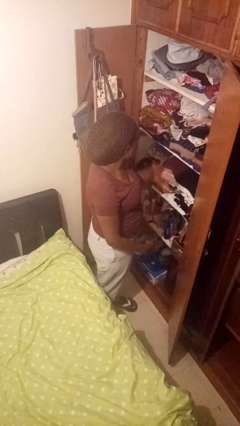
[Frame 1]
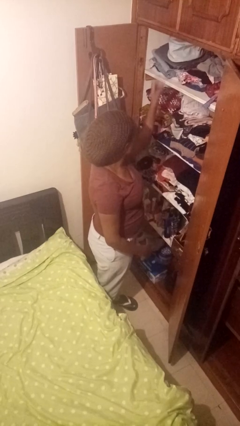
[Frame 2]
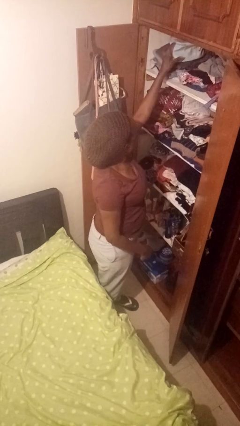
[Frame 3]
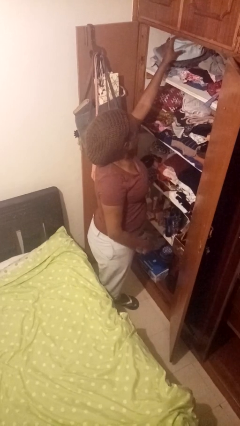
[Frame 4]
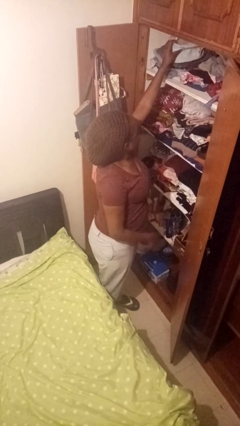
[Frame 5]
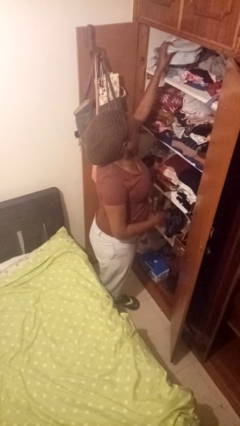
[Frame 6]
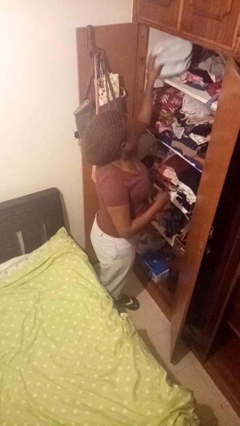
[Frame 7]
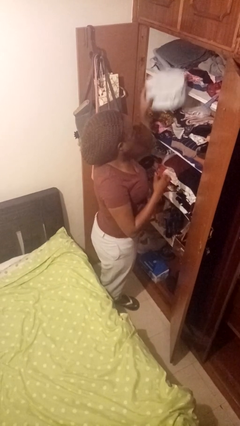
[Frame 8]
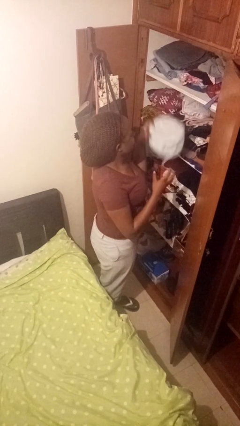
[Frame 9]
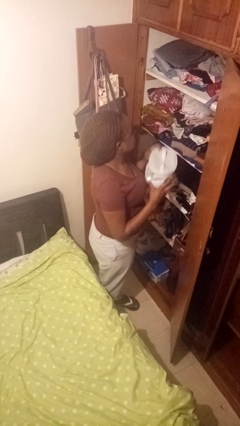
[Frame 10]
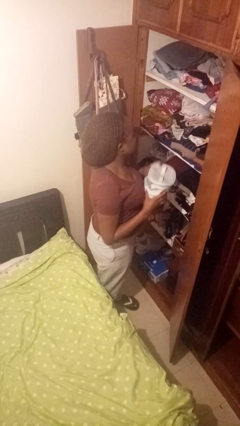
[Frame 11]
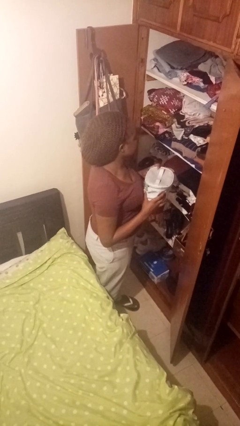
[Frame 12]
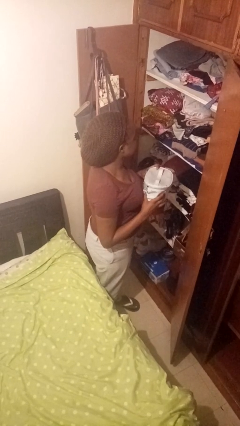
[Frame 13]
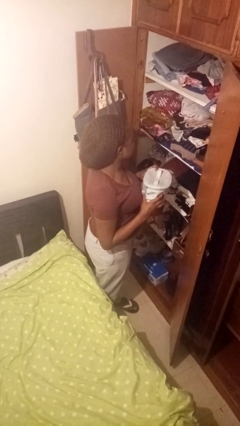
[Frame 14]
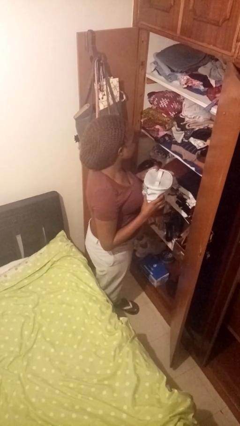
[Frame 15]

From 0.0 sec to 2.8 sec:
person picks up object from shelf

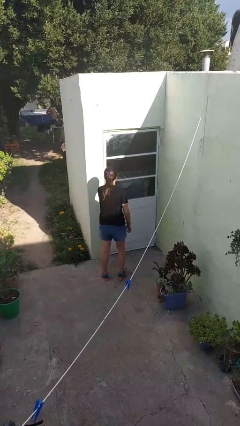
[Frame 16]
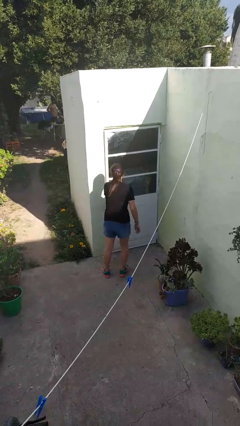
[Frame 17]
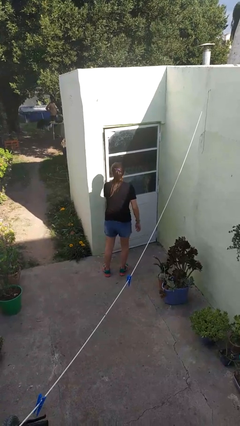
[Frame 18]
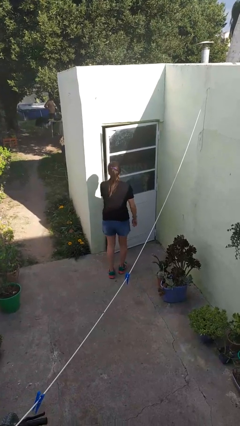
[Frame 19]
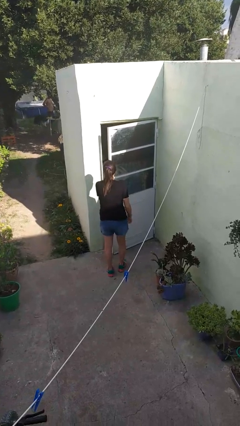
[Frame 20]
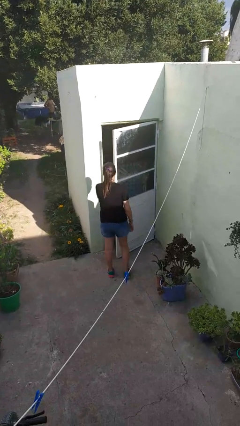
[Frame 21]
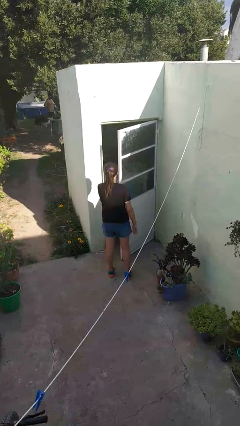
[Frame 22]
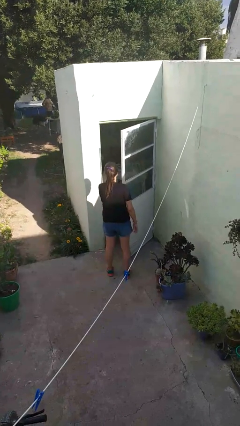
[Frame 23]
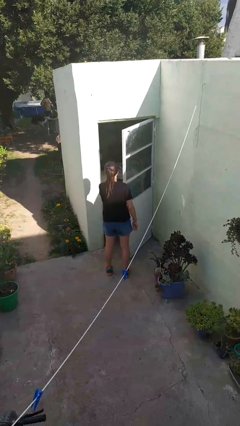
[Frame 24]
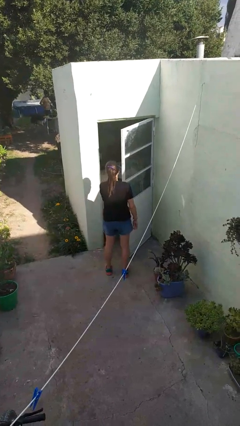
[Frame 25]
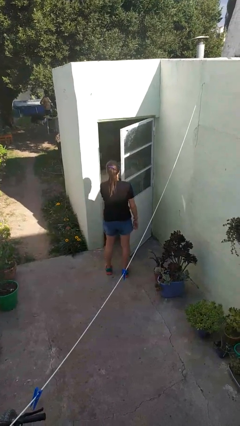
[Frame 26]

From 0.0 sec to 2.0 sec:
person opens facility door

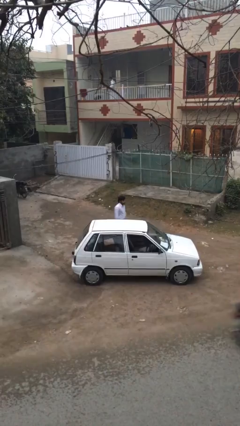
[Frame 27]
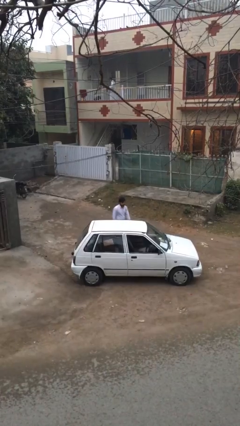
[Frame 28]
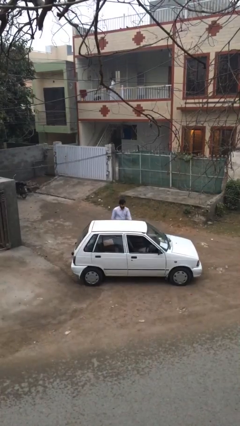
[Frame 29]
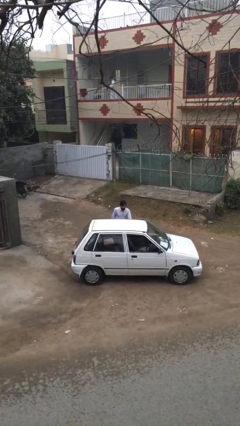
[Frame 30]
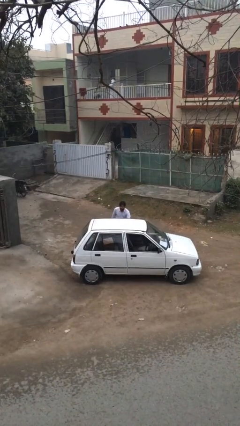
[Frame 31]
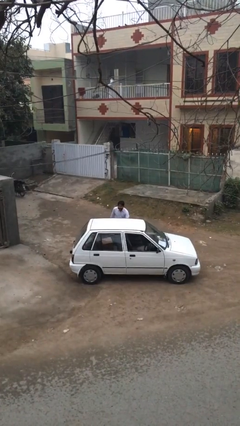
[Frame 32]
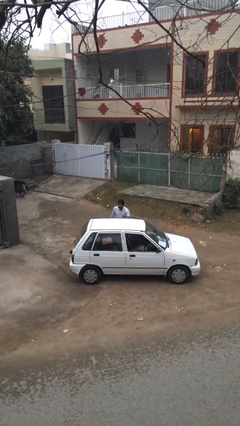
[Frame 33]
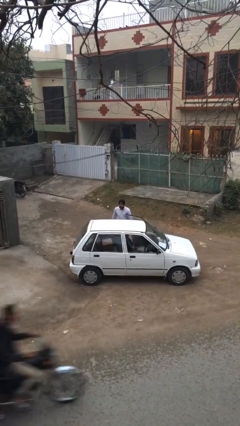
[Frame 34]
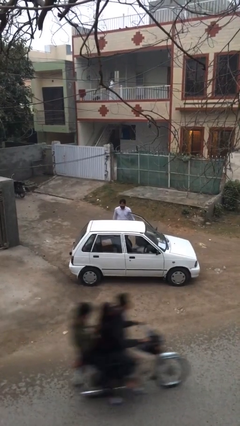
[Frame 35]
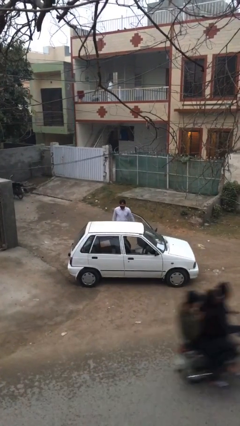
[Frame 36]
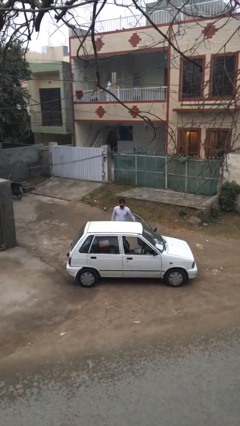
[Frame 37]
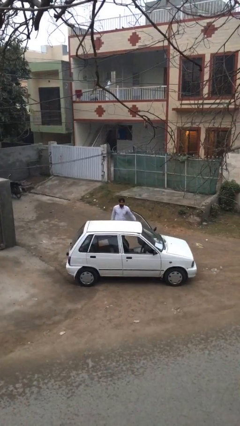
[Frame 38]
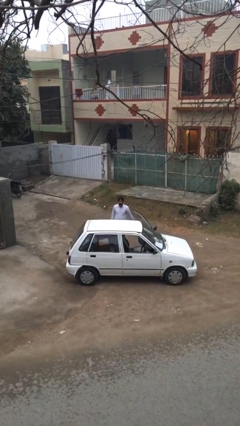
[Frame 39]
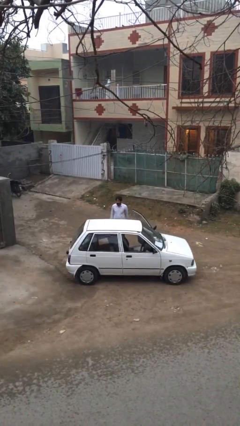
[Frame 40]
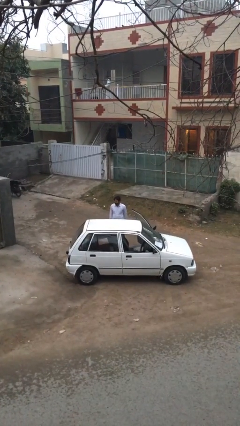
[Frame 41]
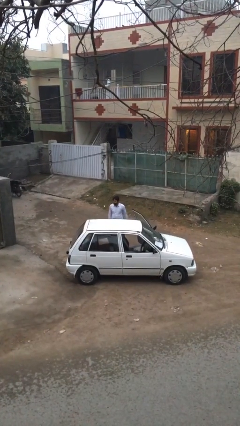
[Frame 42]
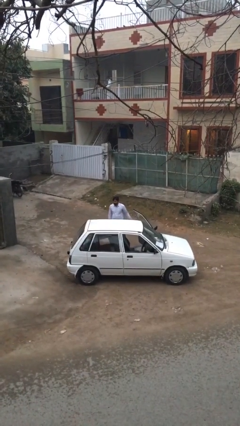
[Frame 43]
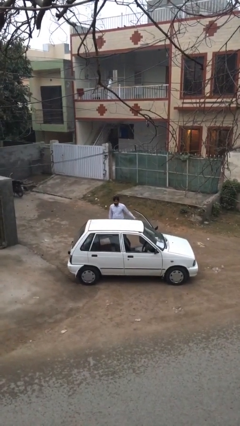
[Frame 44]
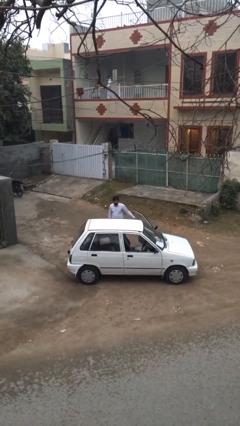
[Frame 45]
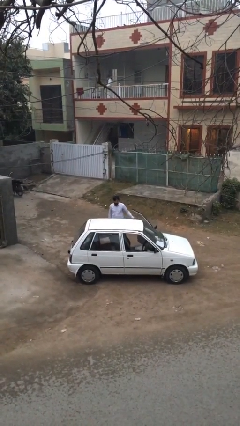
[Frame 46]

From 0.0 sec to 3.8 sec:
person opens car door

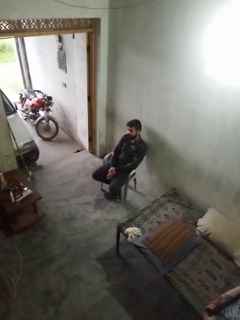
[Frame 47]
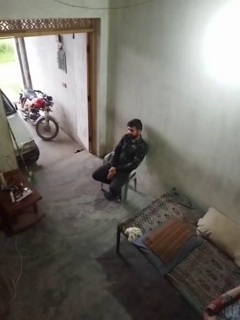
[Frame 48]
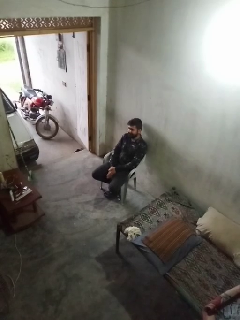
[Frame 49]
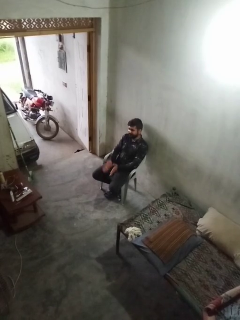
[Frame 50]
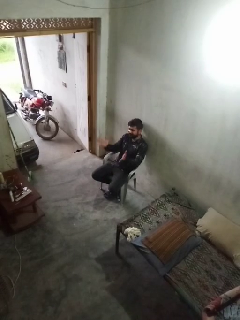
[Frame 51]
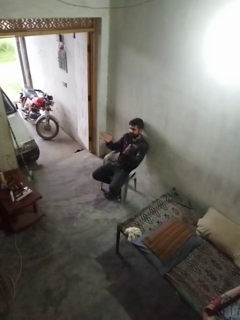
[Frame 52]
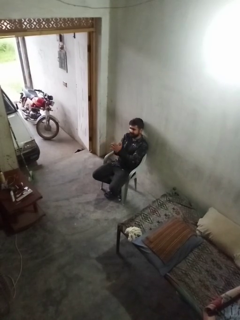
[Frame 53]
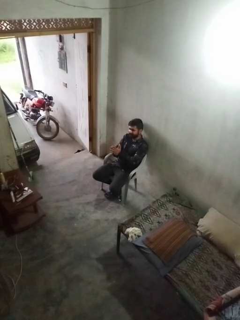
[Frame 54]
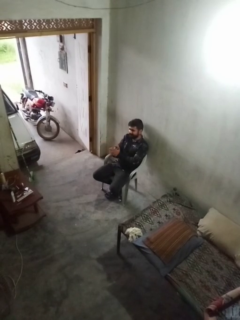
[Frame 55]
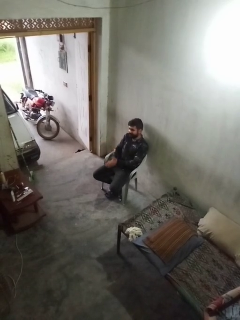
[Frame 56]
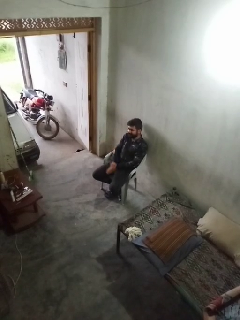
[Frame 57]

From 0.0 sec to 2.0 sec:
person claps hands

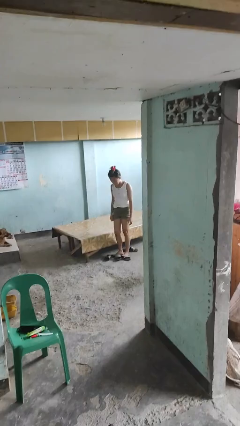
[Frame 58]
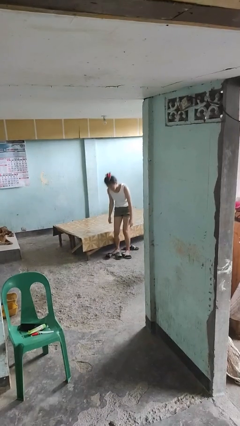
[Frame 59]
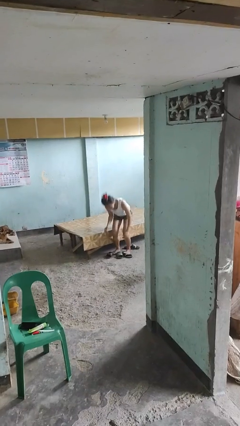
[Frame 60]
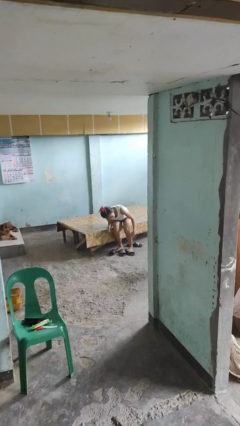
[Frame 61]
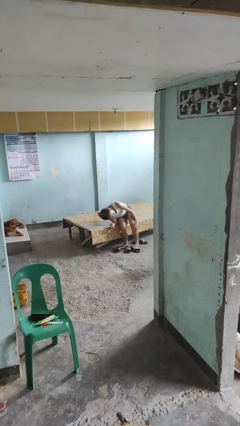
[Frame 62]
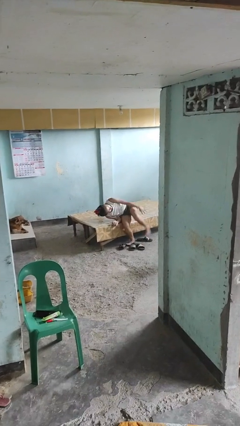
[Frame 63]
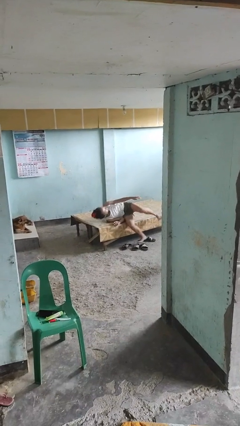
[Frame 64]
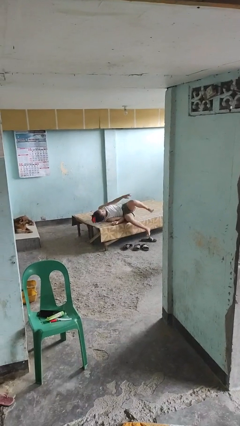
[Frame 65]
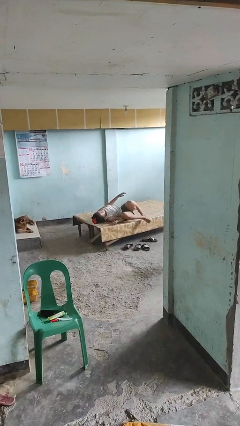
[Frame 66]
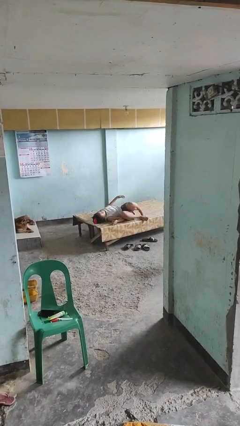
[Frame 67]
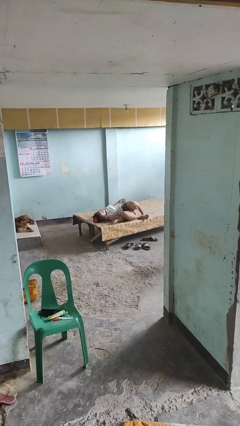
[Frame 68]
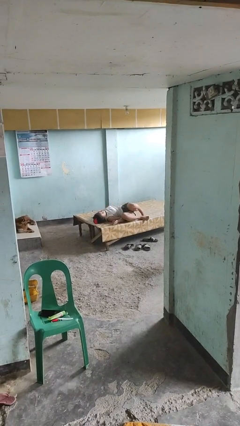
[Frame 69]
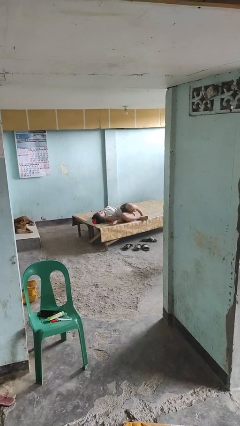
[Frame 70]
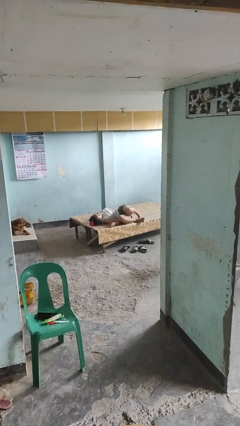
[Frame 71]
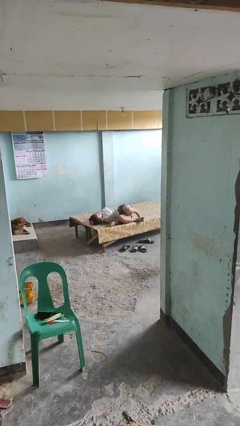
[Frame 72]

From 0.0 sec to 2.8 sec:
person lies down on bed

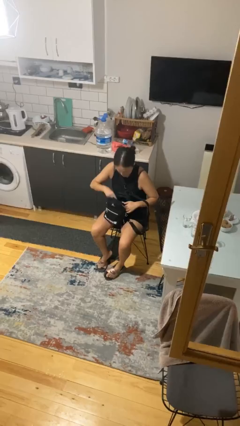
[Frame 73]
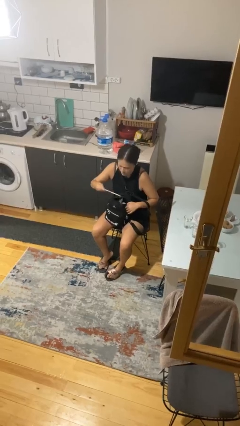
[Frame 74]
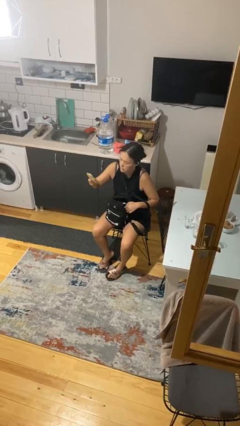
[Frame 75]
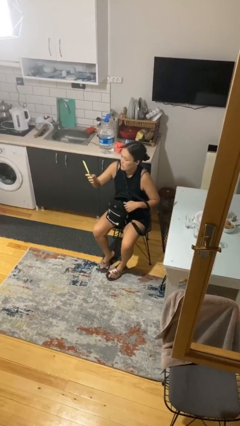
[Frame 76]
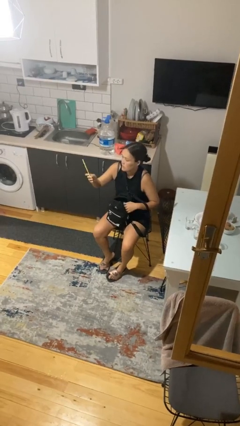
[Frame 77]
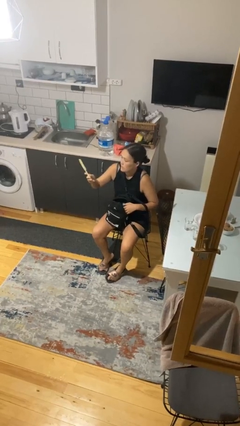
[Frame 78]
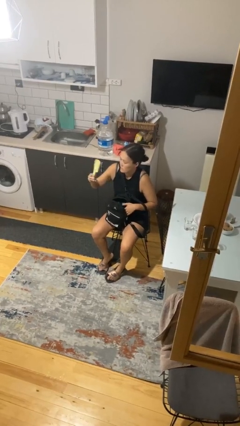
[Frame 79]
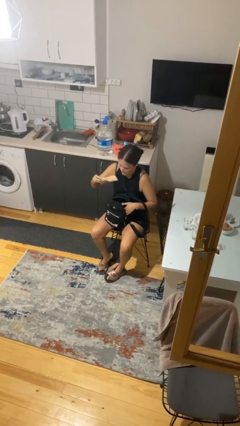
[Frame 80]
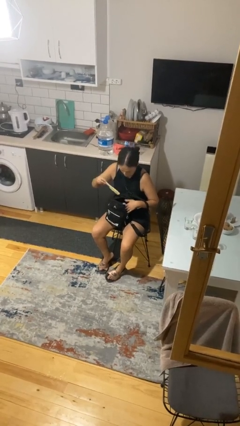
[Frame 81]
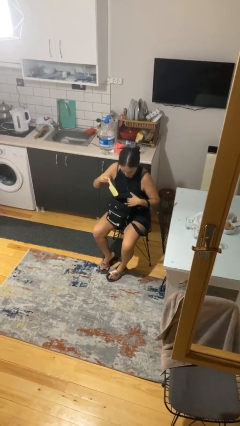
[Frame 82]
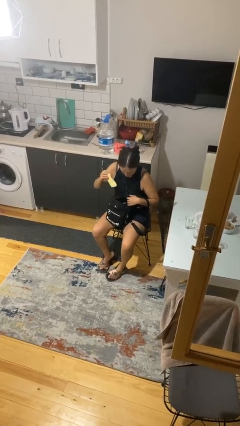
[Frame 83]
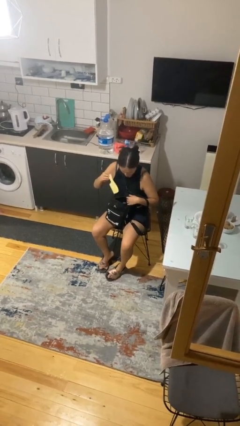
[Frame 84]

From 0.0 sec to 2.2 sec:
person takes object from backpack

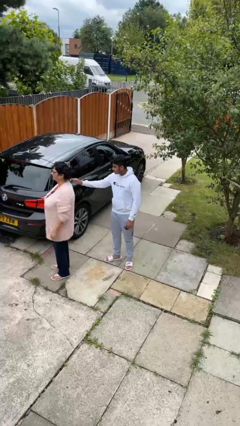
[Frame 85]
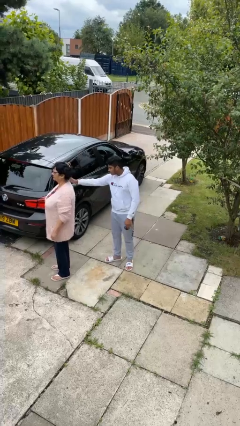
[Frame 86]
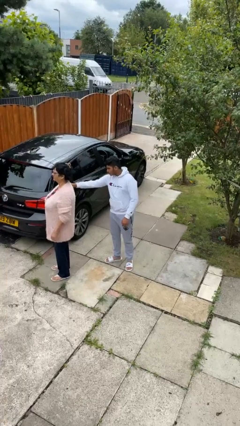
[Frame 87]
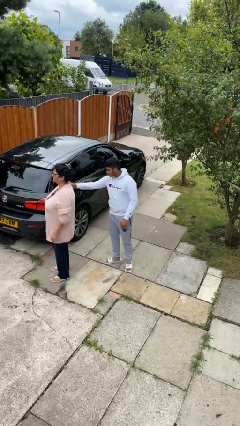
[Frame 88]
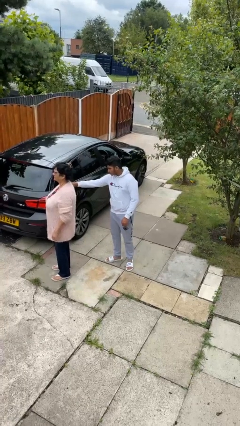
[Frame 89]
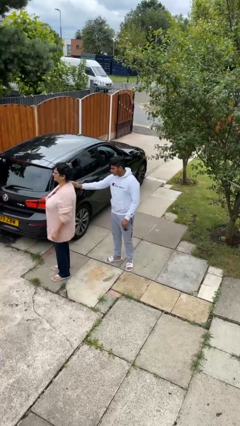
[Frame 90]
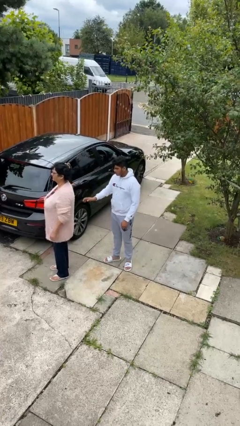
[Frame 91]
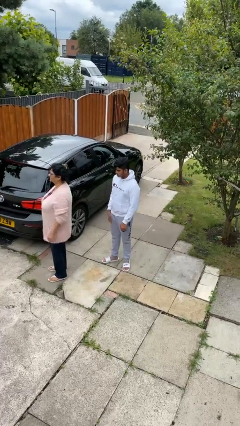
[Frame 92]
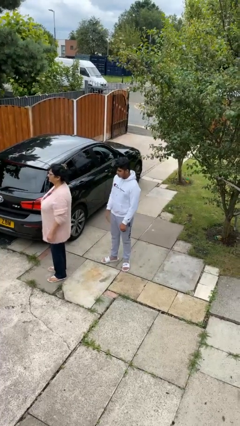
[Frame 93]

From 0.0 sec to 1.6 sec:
person touches back of person

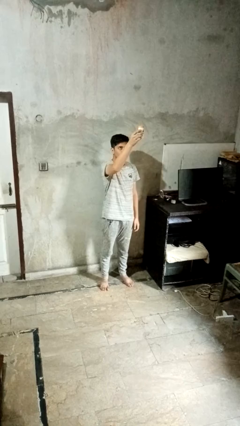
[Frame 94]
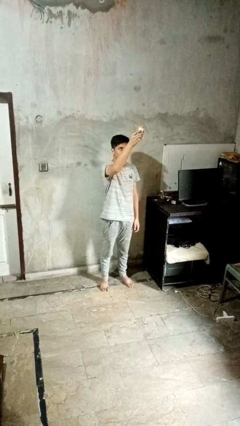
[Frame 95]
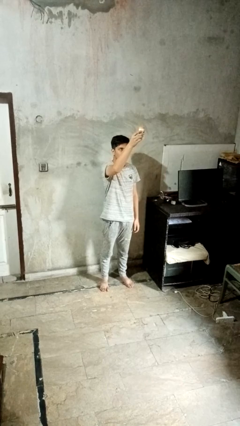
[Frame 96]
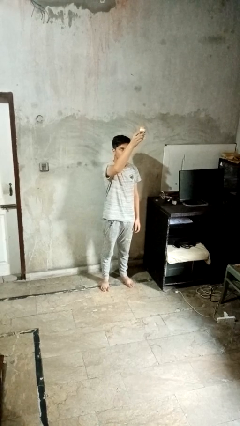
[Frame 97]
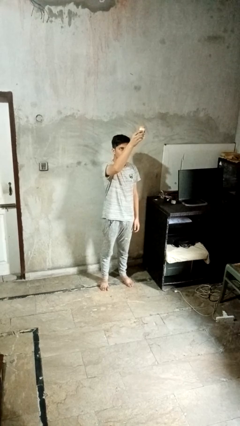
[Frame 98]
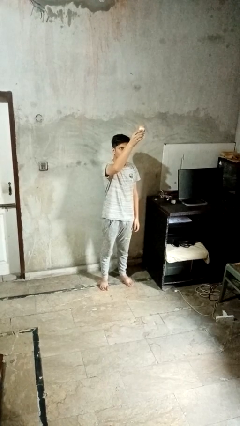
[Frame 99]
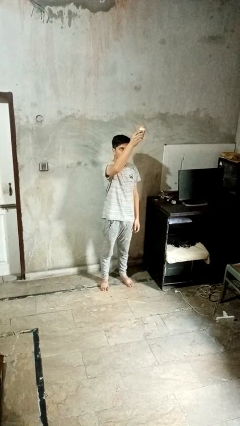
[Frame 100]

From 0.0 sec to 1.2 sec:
person drops object
